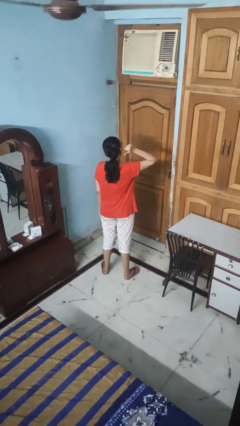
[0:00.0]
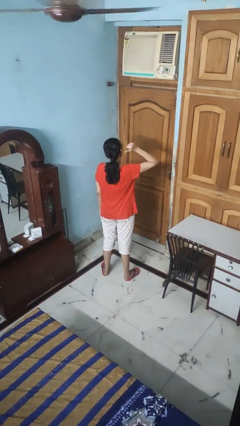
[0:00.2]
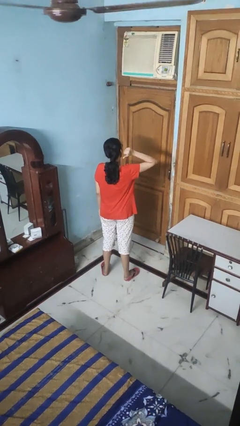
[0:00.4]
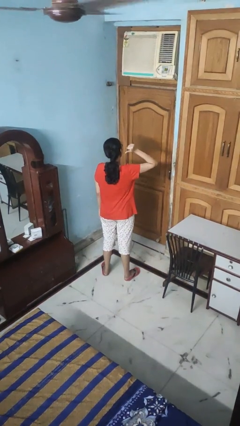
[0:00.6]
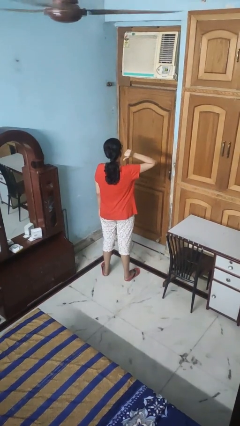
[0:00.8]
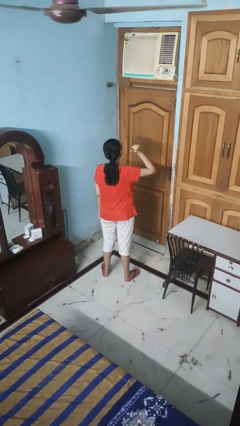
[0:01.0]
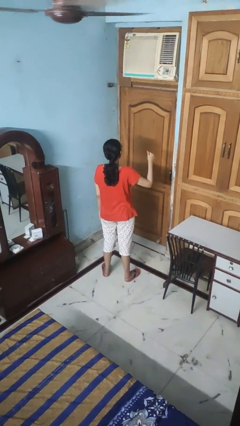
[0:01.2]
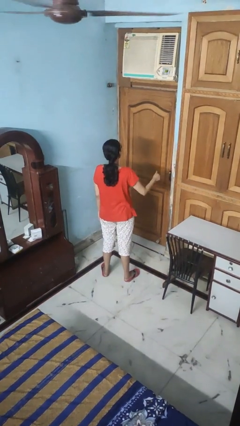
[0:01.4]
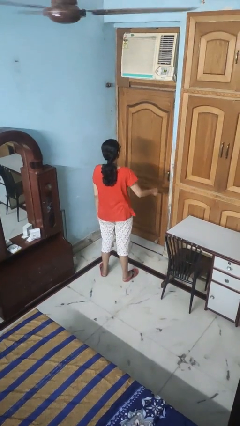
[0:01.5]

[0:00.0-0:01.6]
person gestures behind me

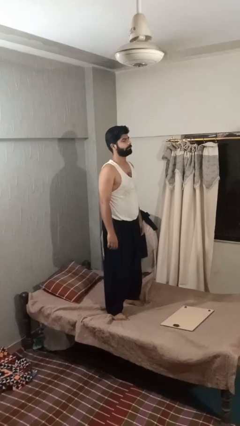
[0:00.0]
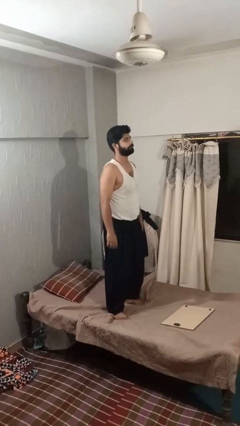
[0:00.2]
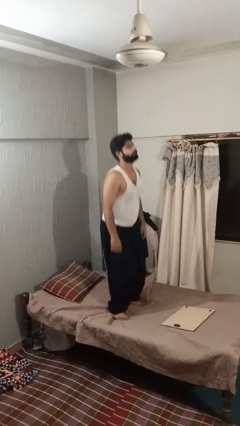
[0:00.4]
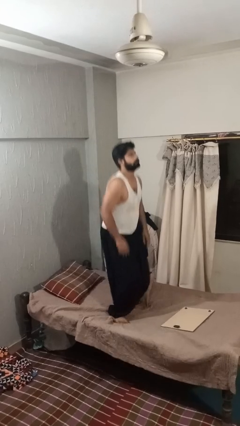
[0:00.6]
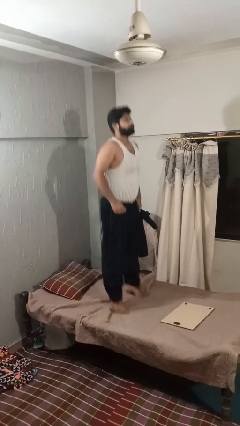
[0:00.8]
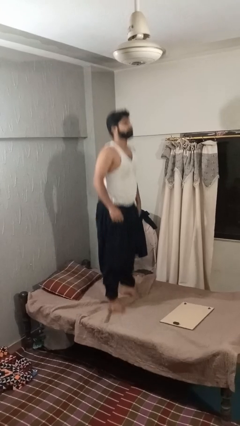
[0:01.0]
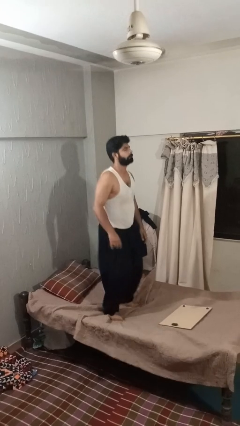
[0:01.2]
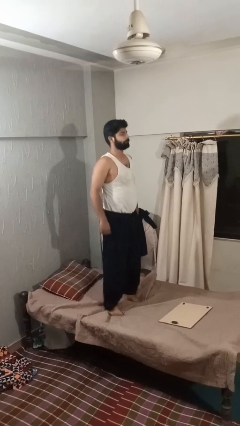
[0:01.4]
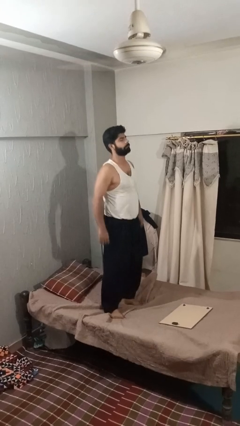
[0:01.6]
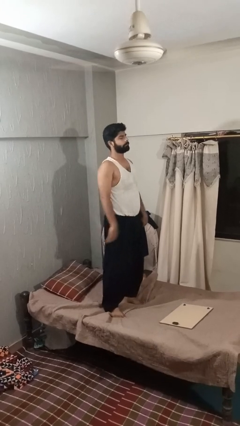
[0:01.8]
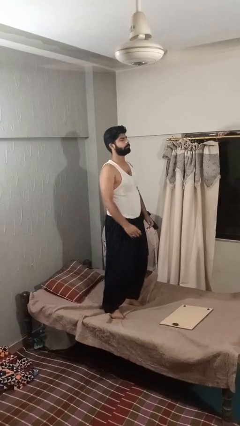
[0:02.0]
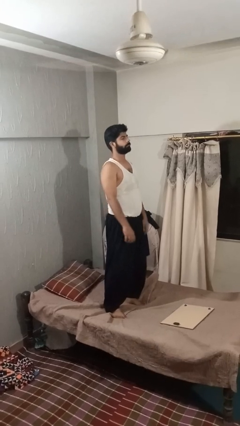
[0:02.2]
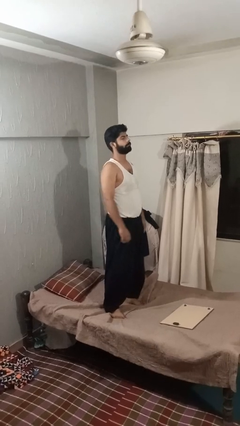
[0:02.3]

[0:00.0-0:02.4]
person jumps on bed

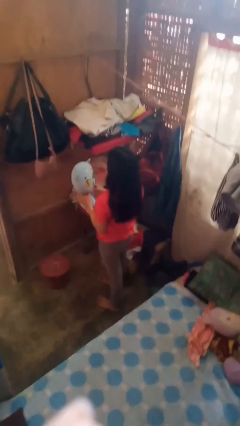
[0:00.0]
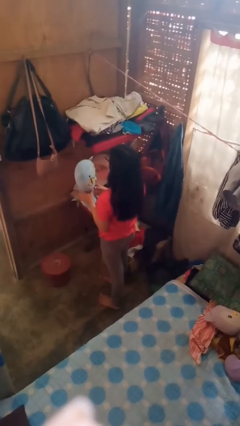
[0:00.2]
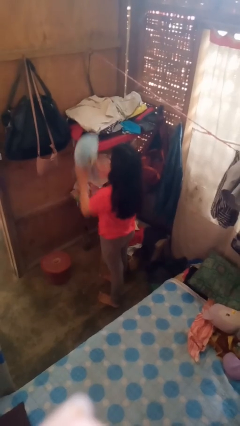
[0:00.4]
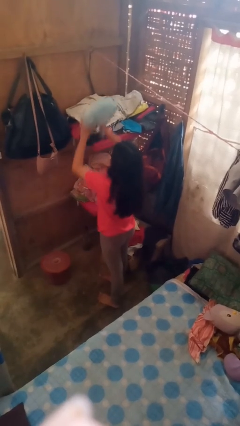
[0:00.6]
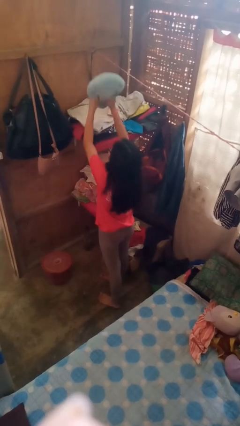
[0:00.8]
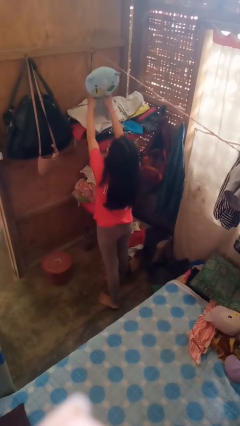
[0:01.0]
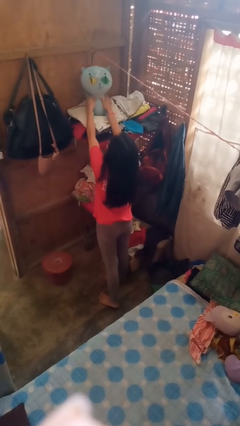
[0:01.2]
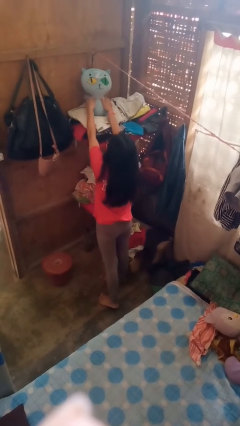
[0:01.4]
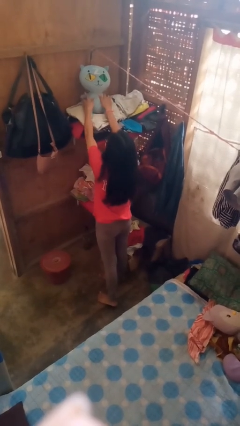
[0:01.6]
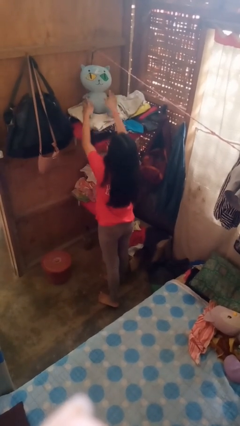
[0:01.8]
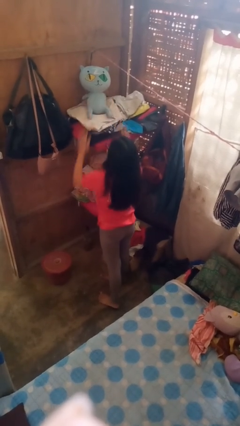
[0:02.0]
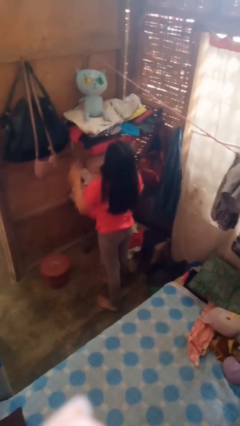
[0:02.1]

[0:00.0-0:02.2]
person puts down object on shelf

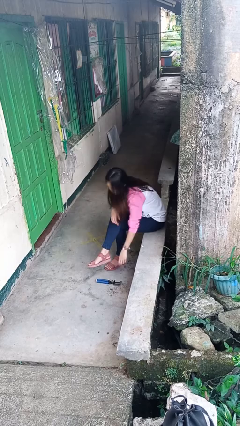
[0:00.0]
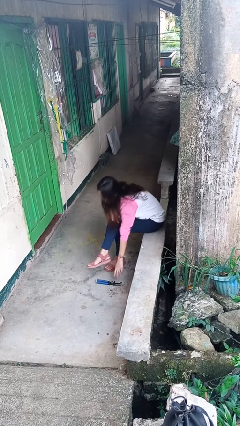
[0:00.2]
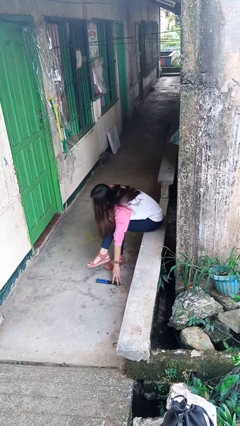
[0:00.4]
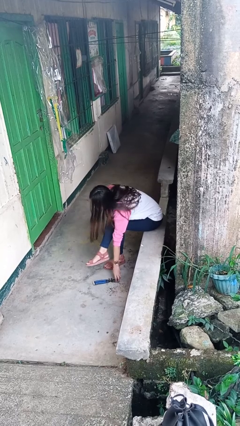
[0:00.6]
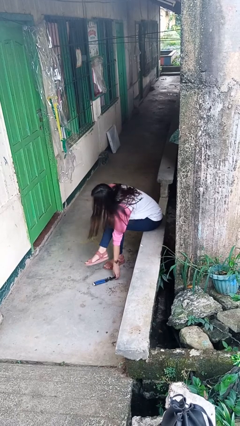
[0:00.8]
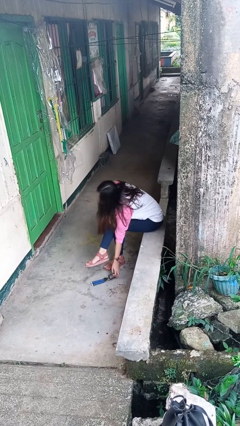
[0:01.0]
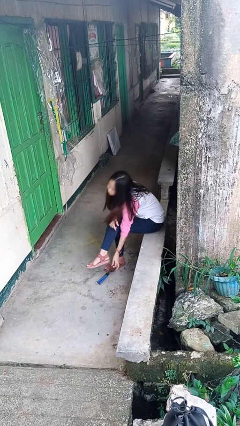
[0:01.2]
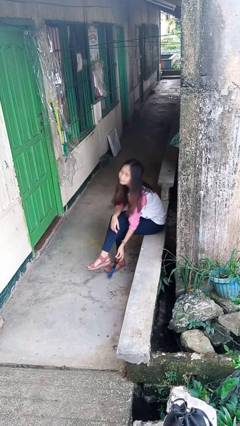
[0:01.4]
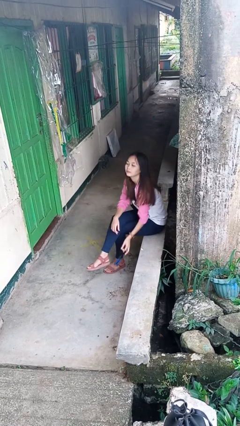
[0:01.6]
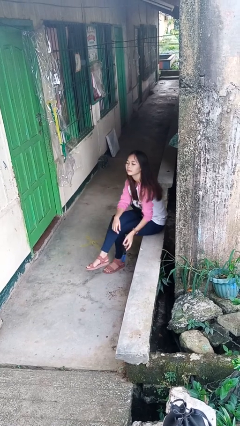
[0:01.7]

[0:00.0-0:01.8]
person picks up object from floor

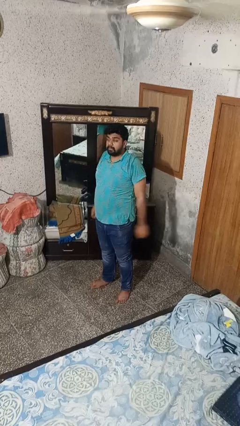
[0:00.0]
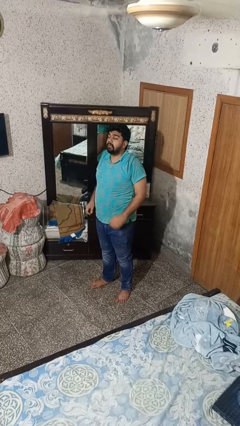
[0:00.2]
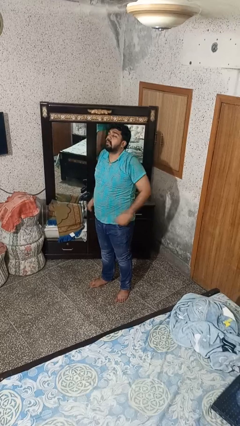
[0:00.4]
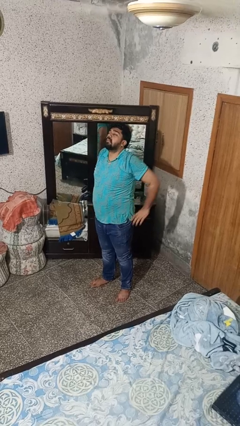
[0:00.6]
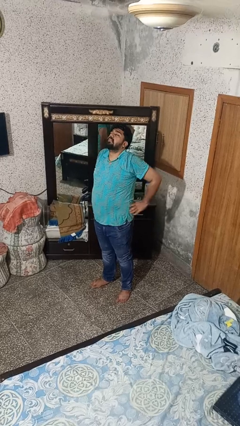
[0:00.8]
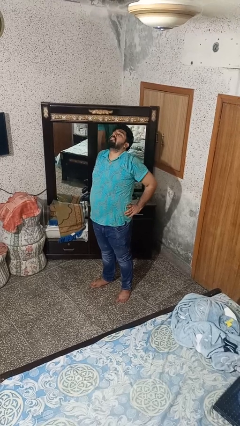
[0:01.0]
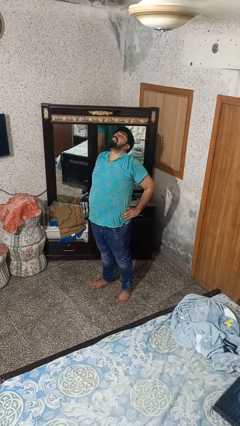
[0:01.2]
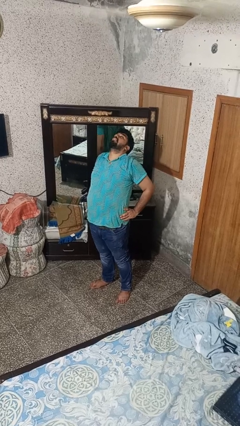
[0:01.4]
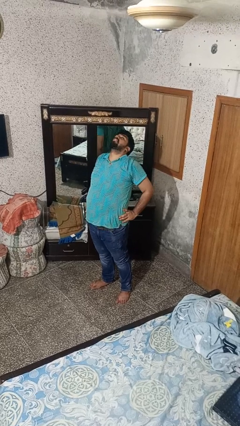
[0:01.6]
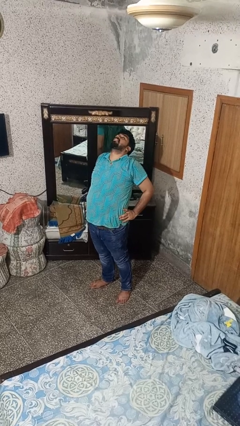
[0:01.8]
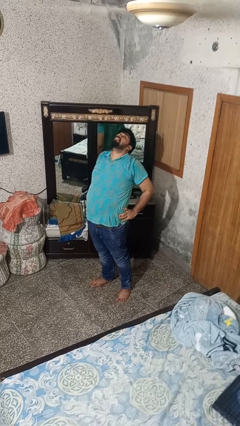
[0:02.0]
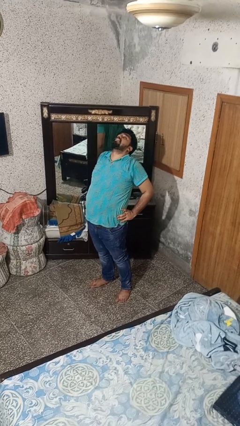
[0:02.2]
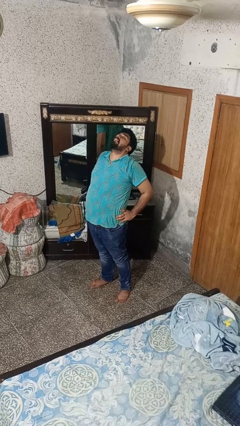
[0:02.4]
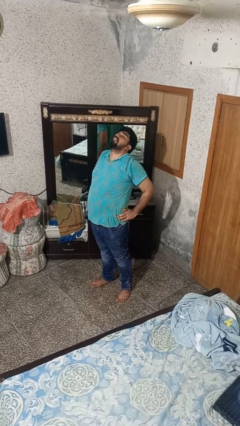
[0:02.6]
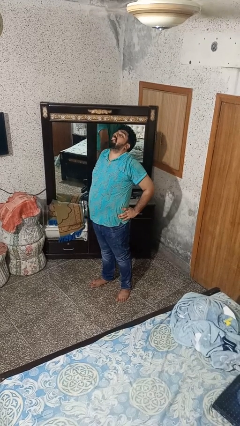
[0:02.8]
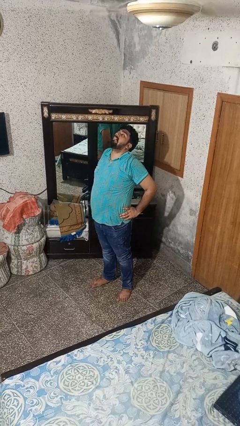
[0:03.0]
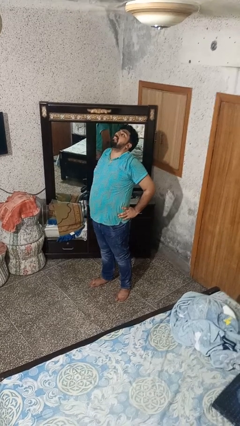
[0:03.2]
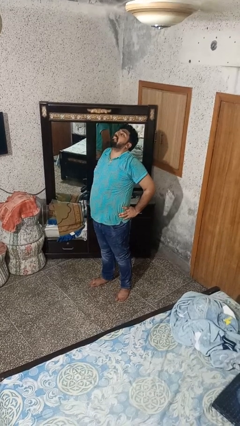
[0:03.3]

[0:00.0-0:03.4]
person stretches back

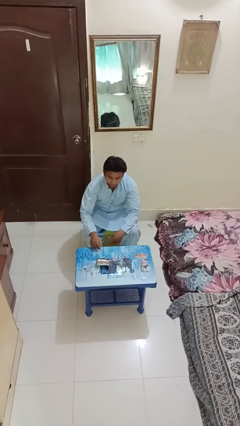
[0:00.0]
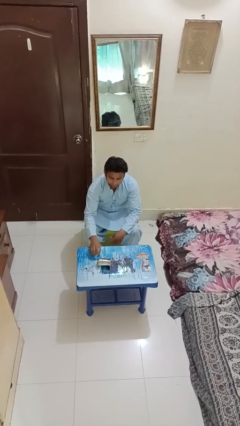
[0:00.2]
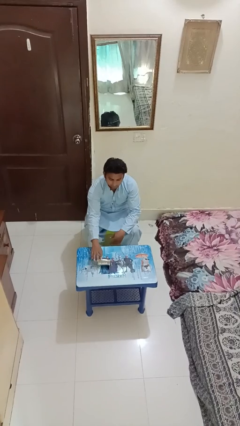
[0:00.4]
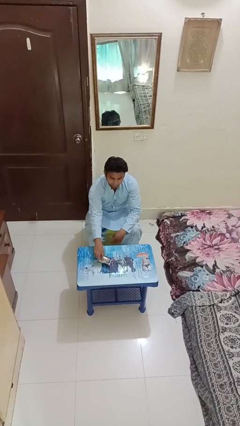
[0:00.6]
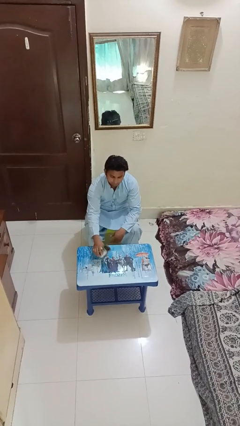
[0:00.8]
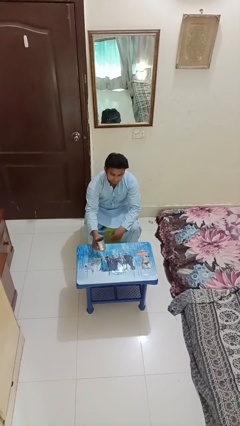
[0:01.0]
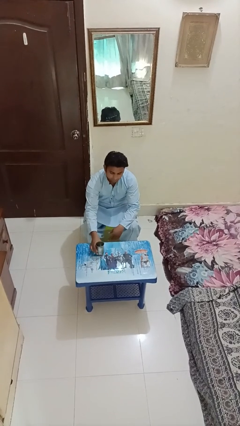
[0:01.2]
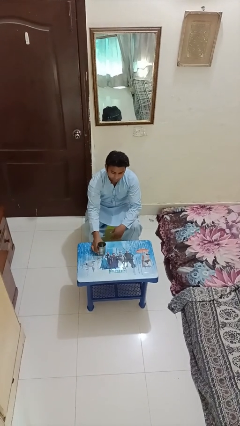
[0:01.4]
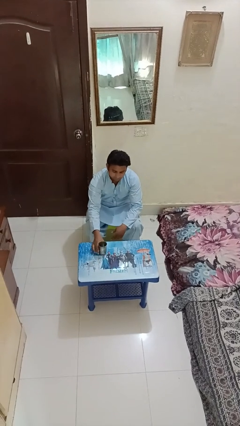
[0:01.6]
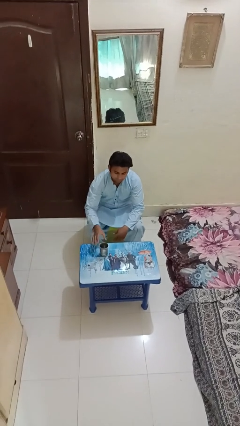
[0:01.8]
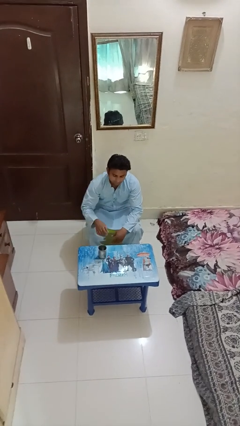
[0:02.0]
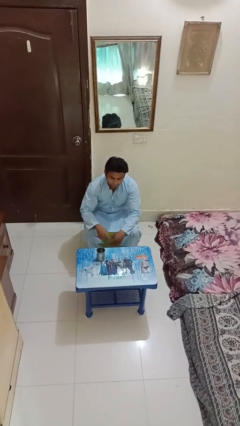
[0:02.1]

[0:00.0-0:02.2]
person sets upright glass

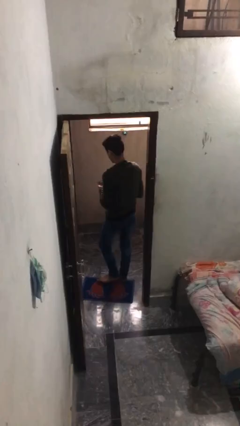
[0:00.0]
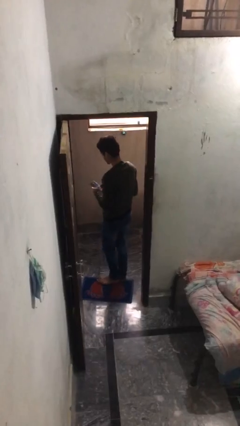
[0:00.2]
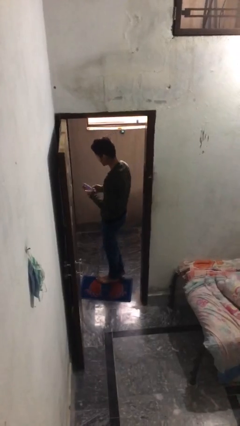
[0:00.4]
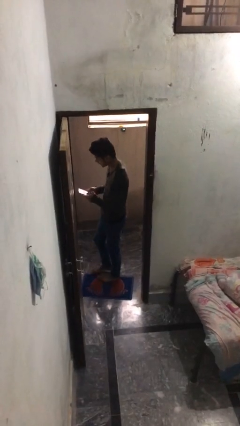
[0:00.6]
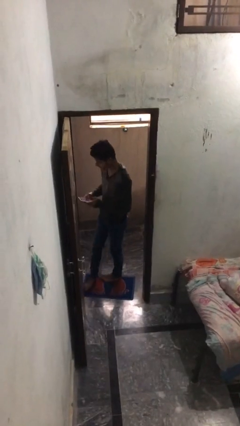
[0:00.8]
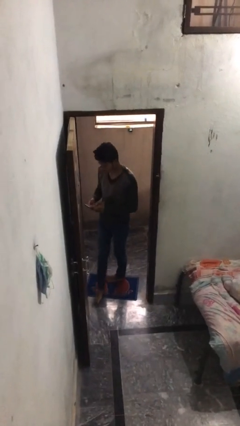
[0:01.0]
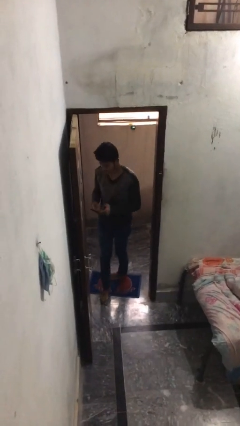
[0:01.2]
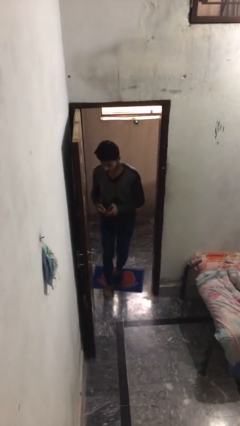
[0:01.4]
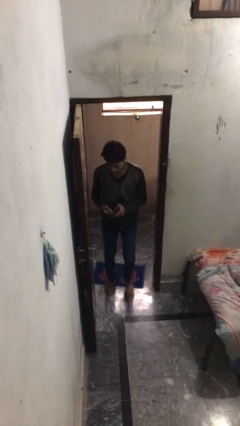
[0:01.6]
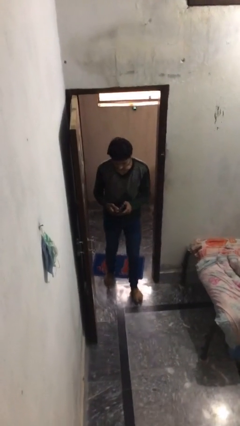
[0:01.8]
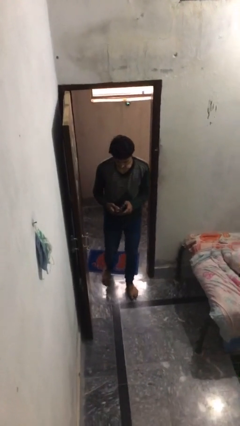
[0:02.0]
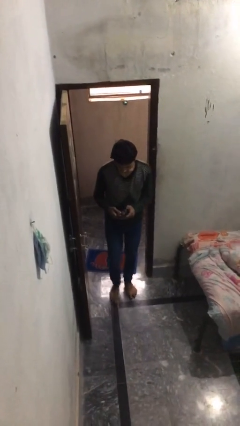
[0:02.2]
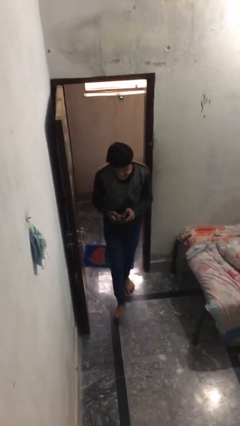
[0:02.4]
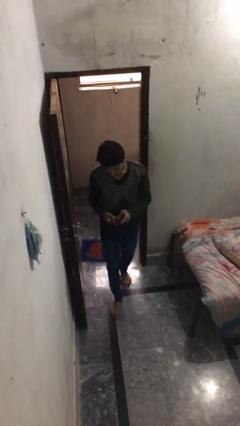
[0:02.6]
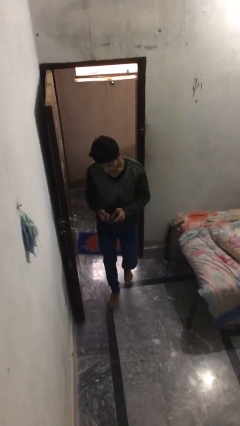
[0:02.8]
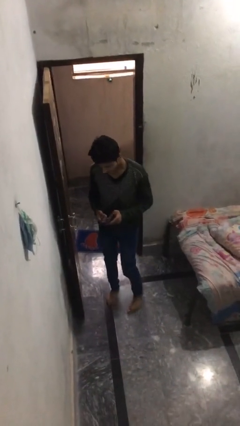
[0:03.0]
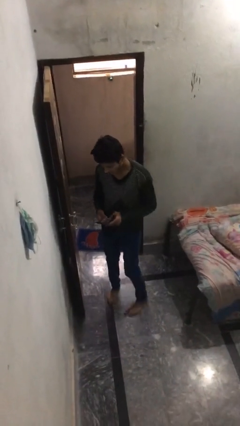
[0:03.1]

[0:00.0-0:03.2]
person enters scene through structure
